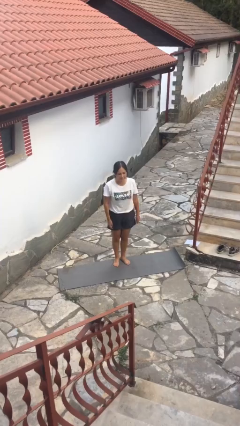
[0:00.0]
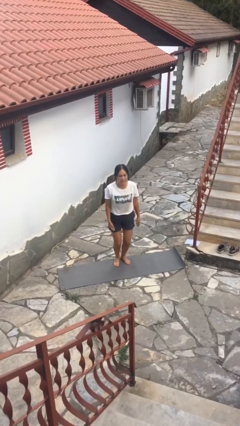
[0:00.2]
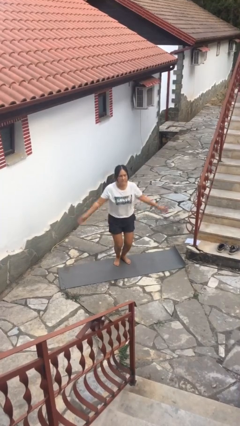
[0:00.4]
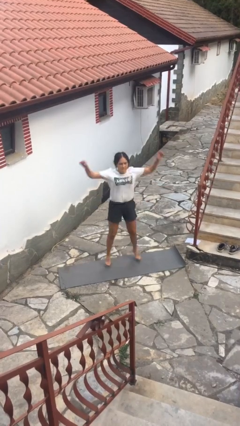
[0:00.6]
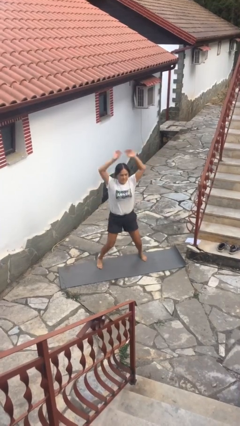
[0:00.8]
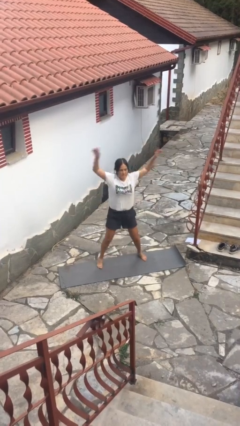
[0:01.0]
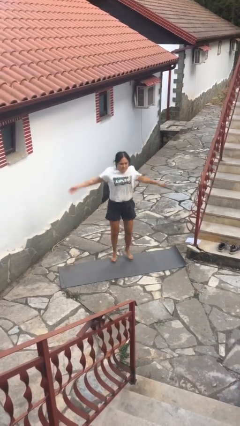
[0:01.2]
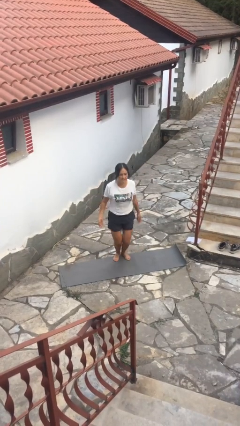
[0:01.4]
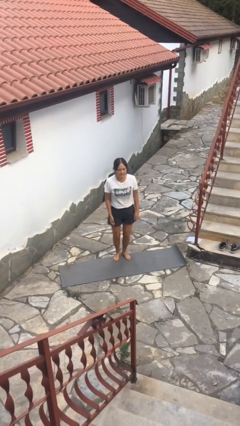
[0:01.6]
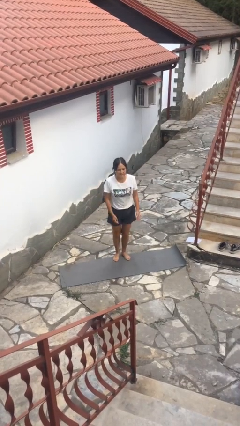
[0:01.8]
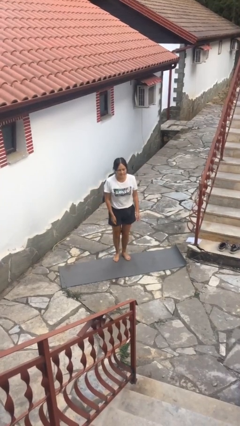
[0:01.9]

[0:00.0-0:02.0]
person exercises with jumping jacks

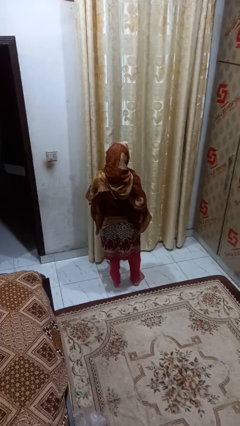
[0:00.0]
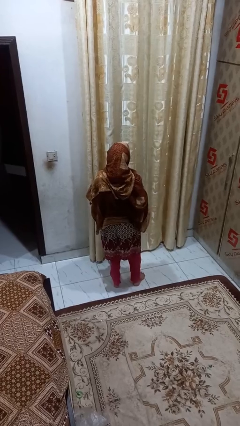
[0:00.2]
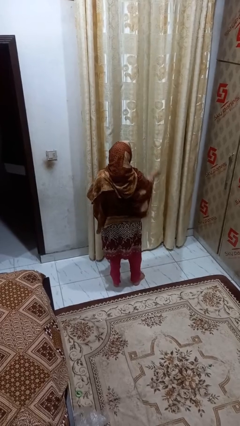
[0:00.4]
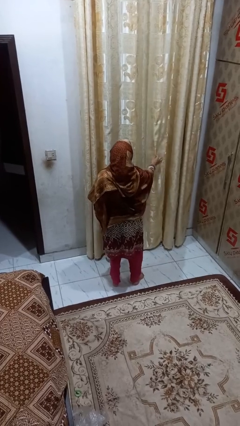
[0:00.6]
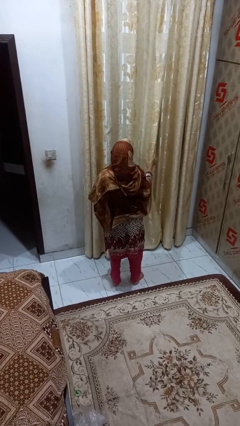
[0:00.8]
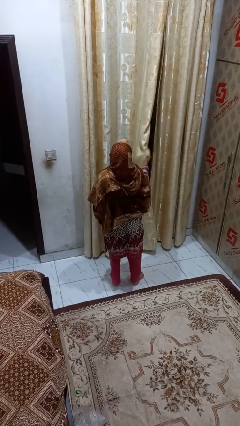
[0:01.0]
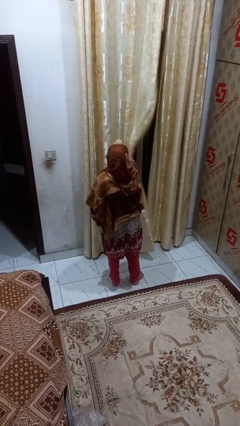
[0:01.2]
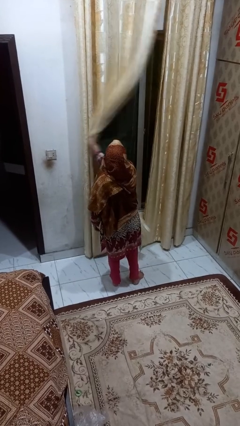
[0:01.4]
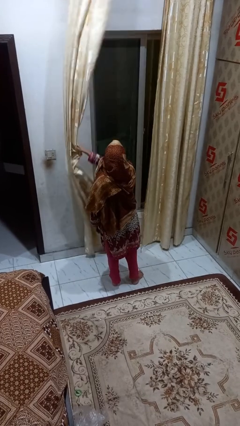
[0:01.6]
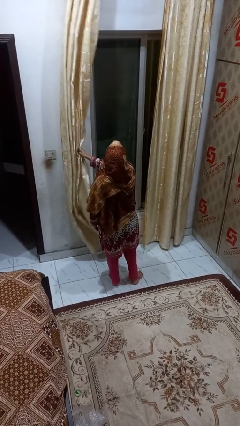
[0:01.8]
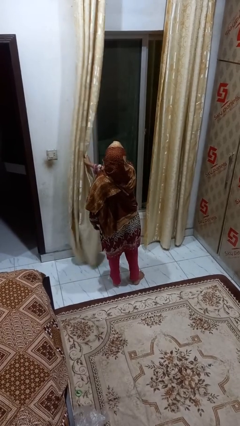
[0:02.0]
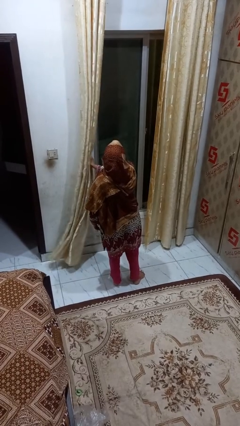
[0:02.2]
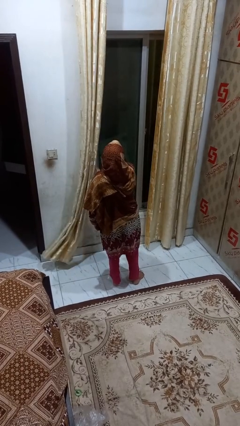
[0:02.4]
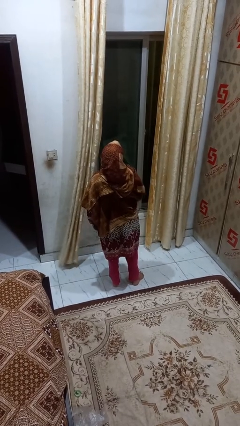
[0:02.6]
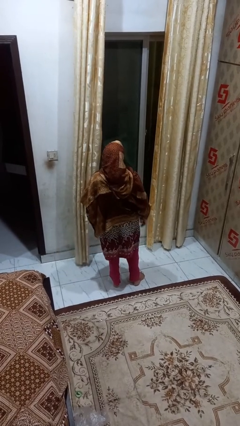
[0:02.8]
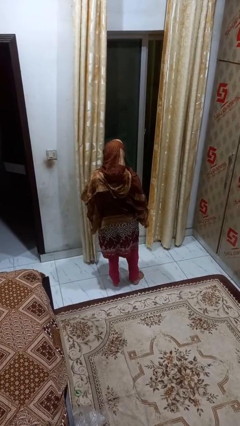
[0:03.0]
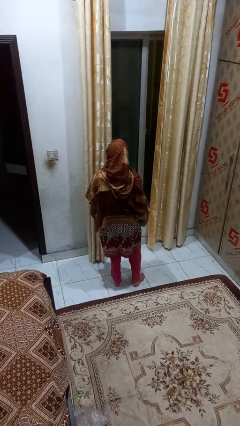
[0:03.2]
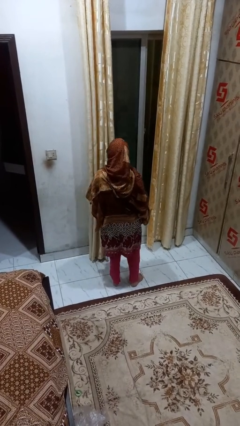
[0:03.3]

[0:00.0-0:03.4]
person opens curtains

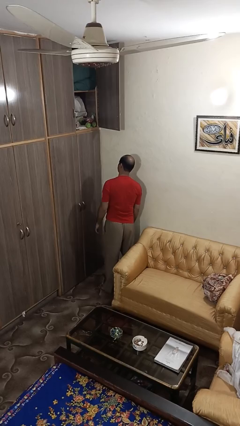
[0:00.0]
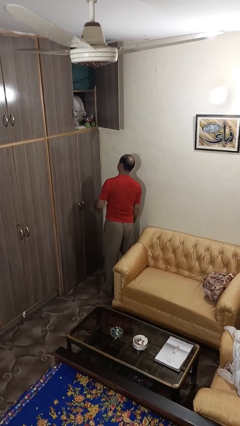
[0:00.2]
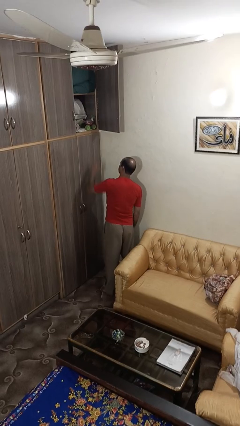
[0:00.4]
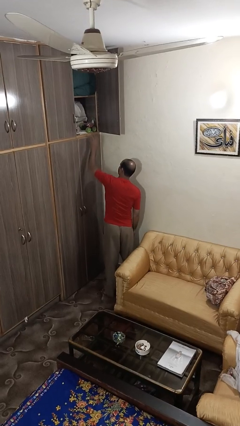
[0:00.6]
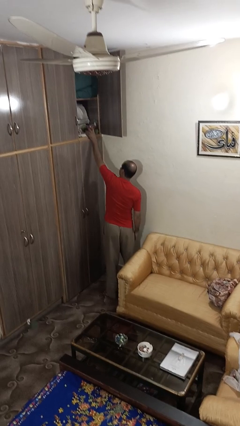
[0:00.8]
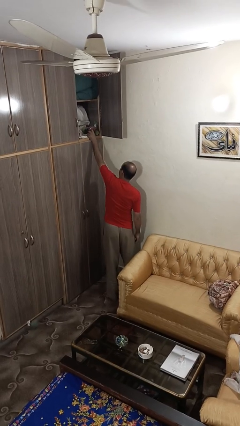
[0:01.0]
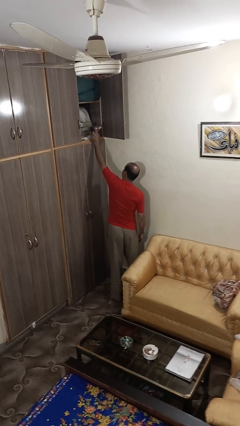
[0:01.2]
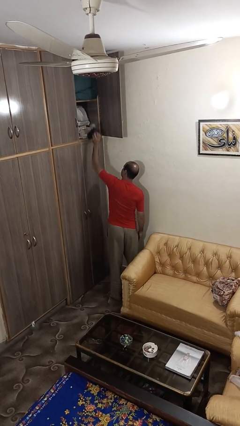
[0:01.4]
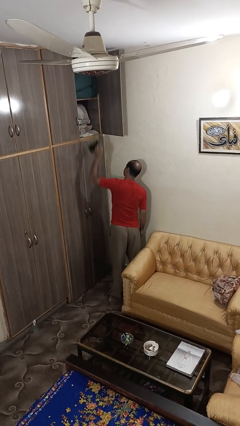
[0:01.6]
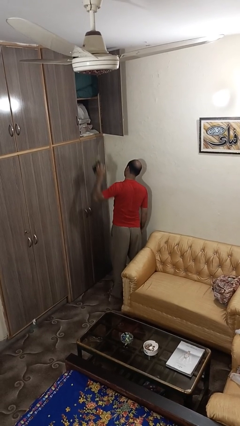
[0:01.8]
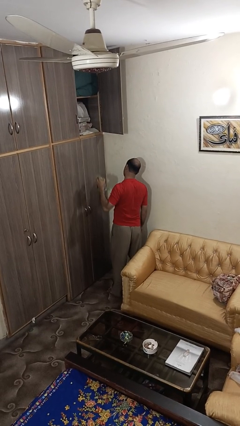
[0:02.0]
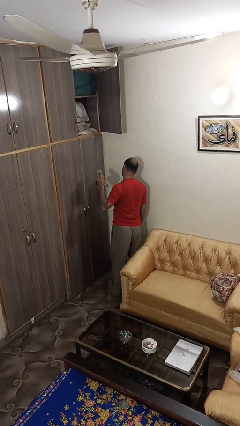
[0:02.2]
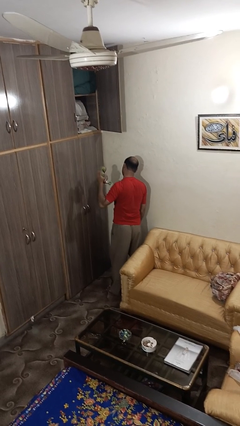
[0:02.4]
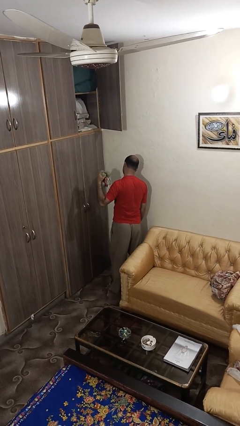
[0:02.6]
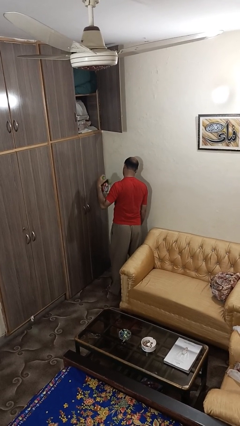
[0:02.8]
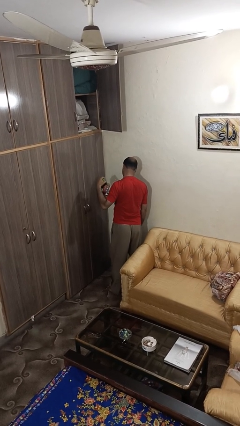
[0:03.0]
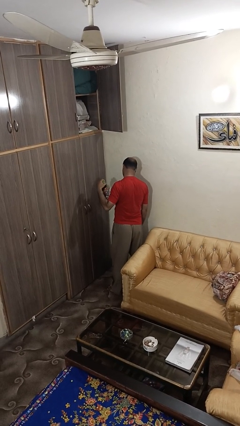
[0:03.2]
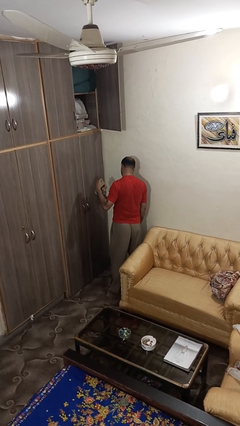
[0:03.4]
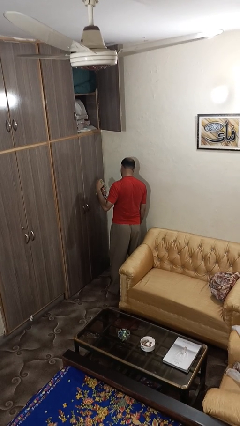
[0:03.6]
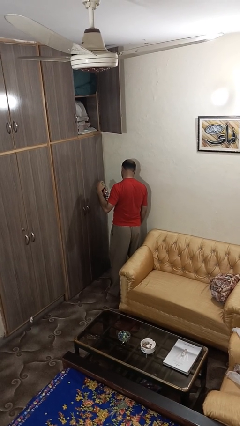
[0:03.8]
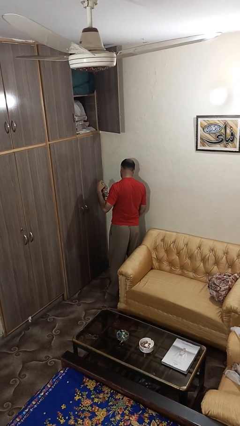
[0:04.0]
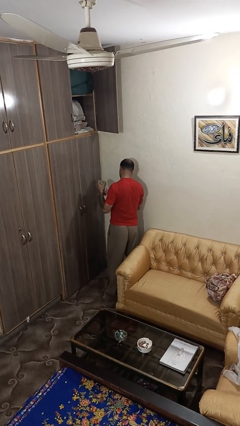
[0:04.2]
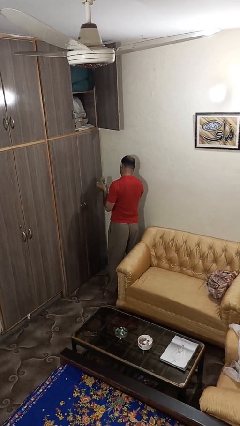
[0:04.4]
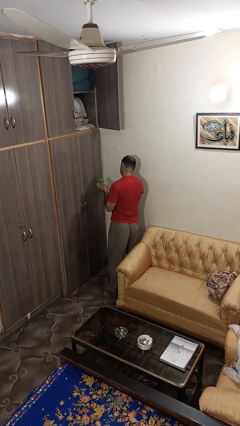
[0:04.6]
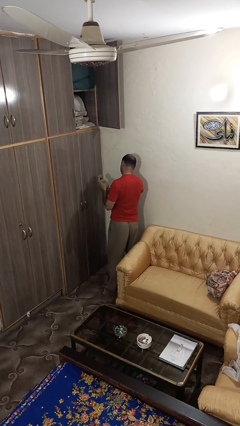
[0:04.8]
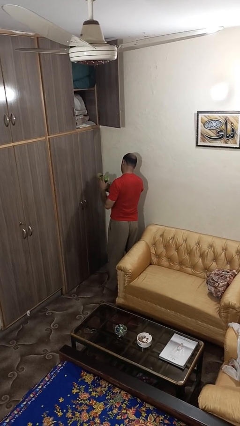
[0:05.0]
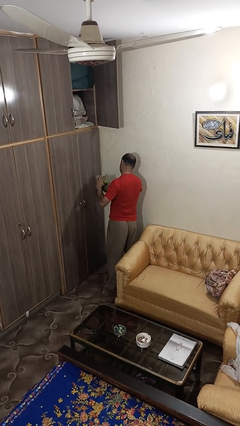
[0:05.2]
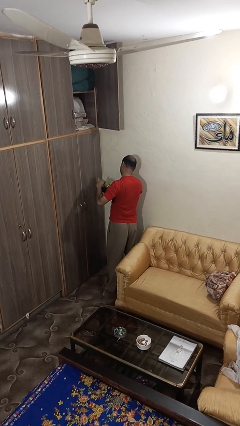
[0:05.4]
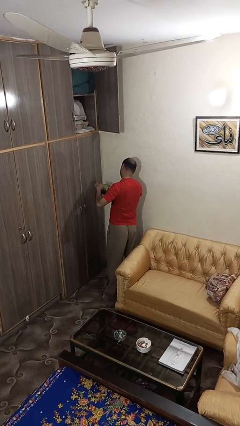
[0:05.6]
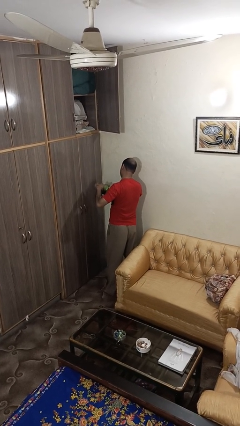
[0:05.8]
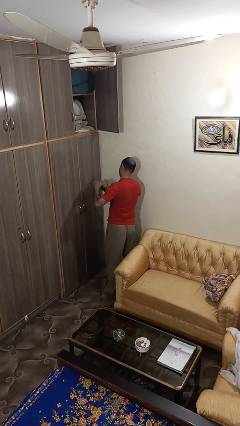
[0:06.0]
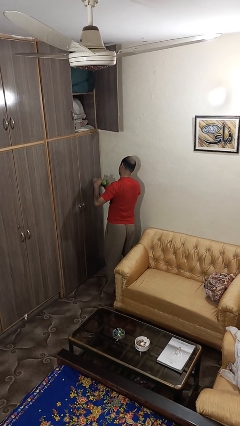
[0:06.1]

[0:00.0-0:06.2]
person picks up object from shelf

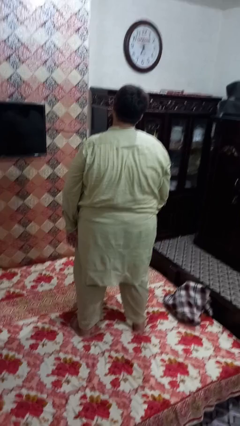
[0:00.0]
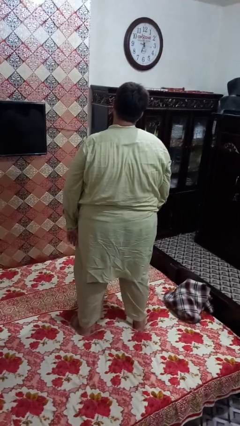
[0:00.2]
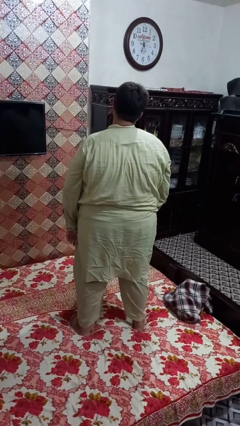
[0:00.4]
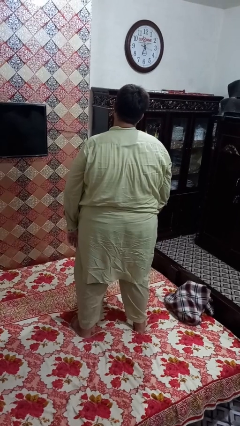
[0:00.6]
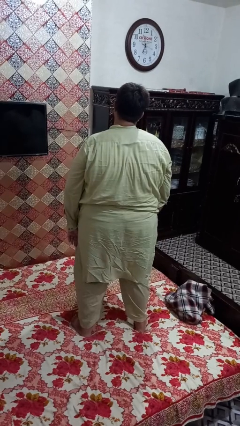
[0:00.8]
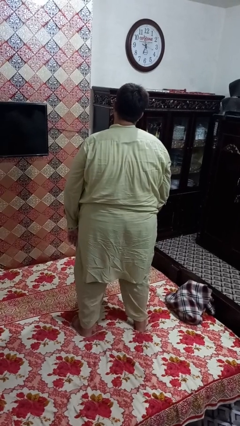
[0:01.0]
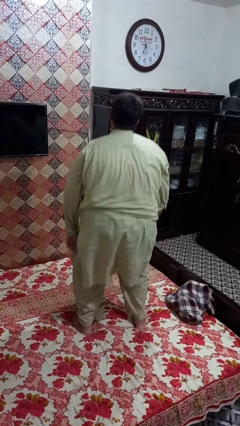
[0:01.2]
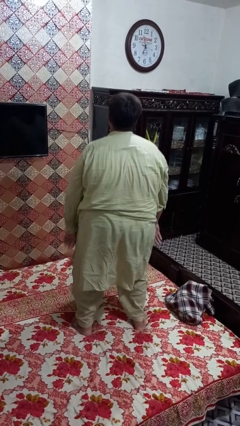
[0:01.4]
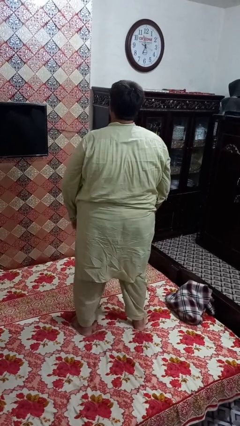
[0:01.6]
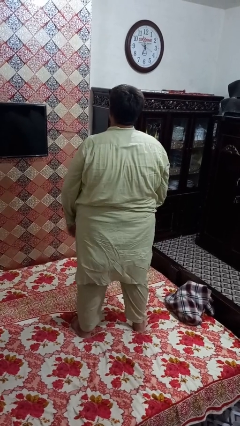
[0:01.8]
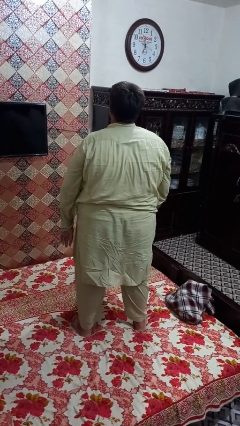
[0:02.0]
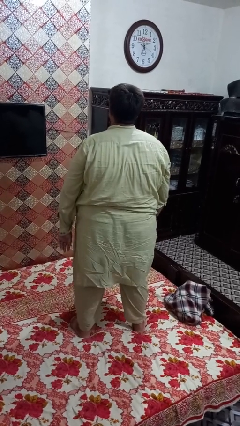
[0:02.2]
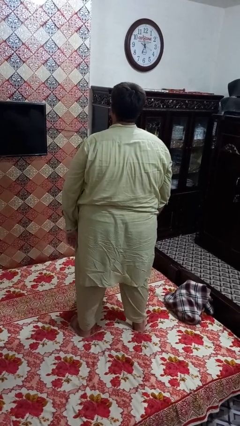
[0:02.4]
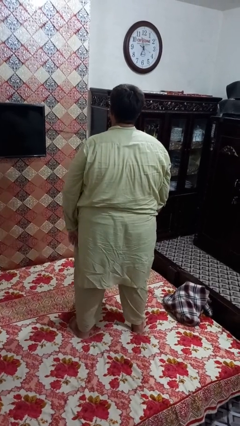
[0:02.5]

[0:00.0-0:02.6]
person jumps on bed

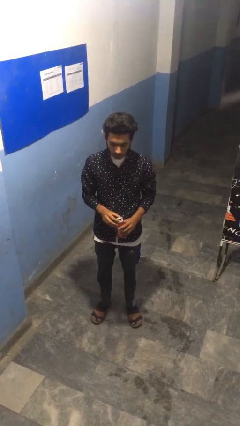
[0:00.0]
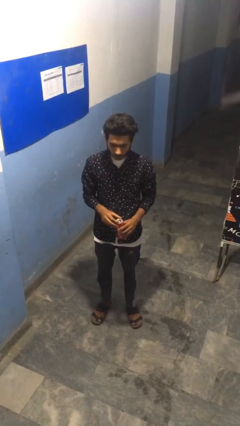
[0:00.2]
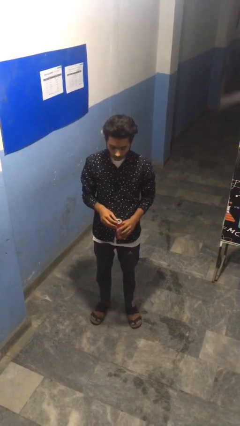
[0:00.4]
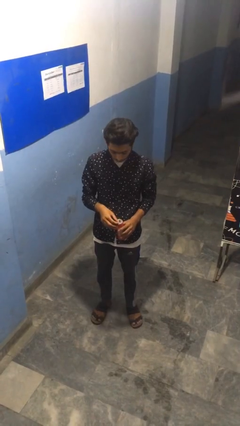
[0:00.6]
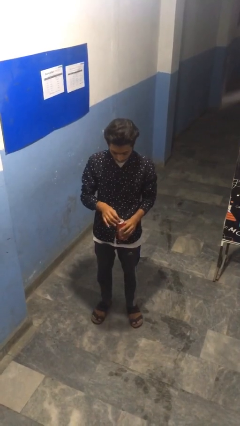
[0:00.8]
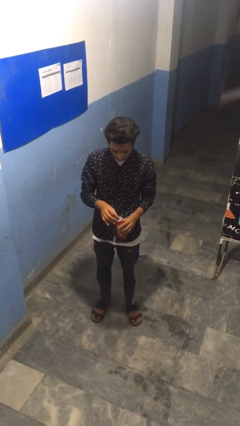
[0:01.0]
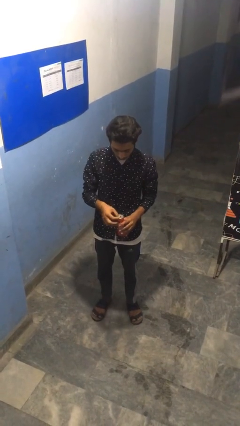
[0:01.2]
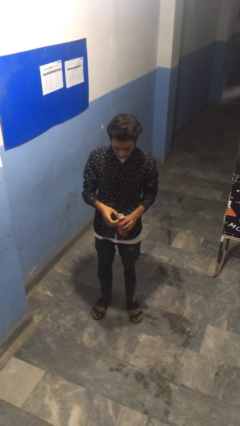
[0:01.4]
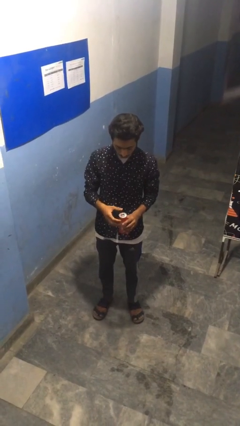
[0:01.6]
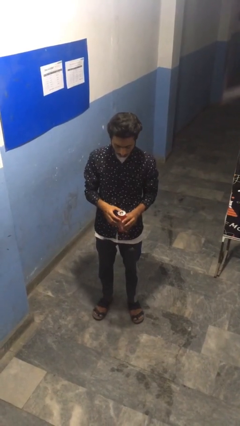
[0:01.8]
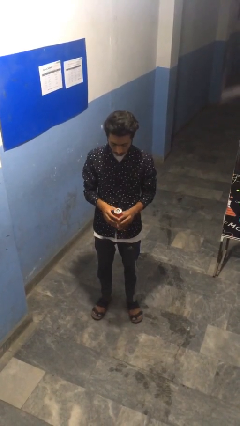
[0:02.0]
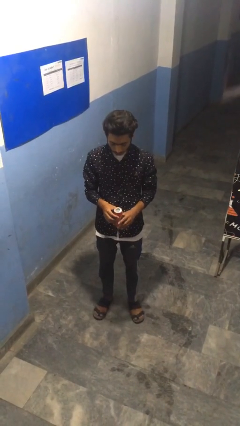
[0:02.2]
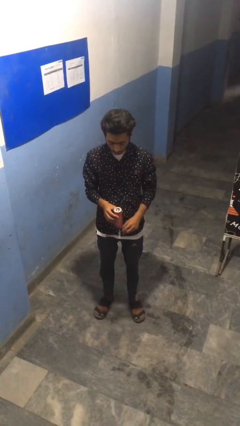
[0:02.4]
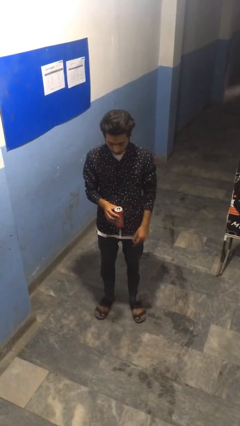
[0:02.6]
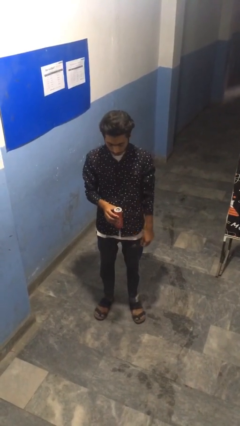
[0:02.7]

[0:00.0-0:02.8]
person opens beverage can
